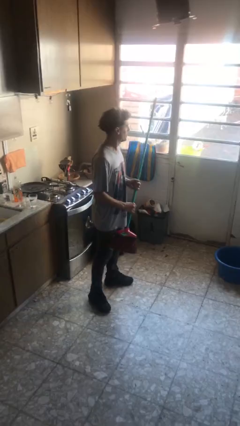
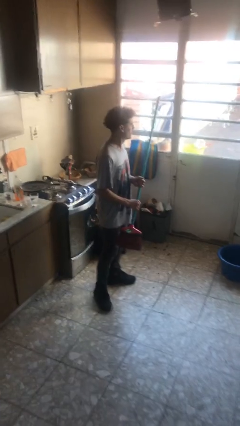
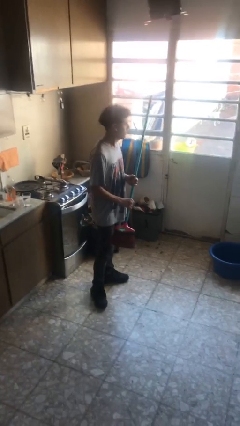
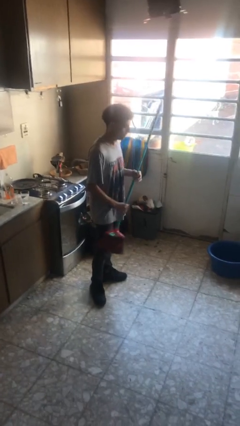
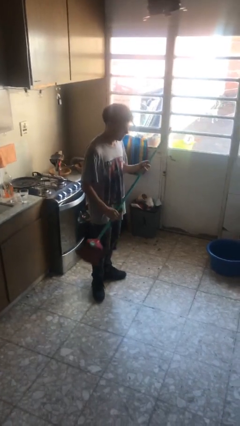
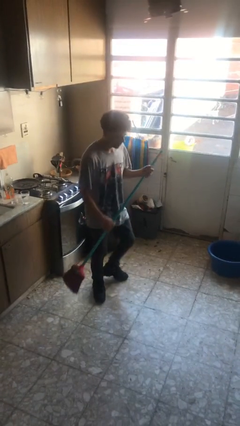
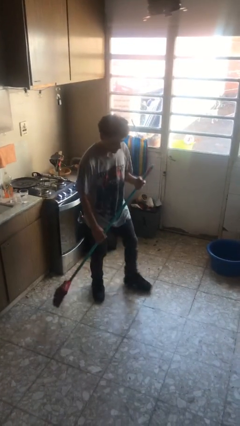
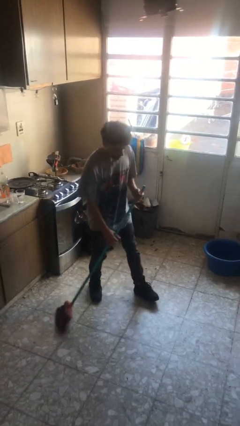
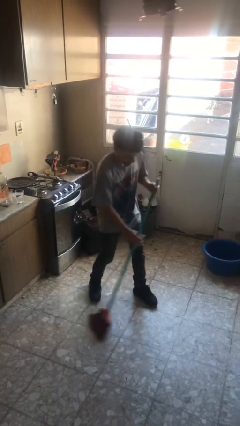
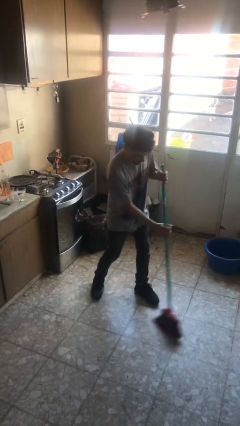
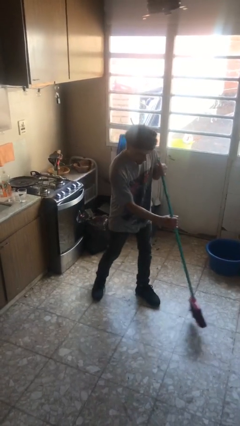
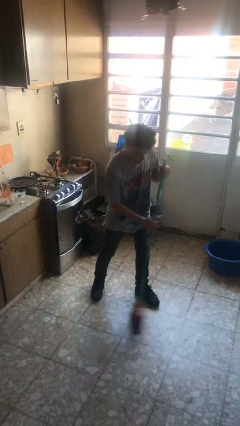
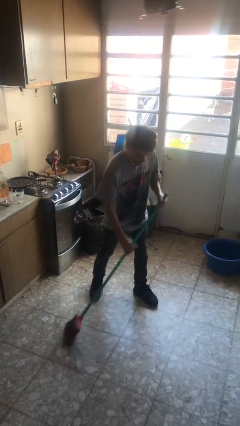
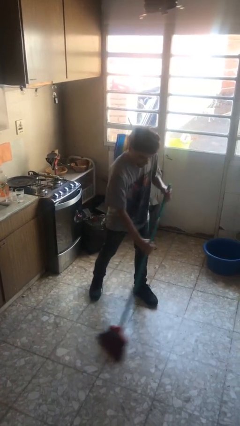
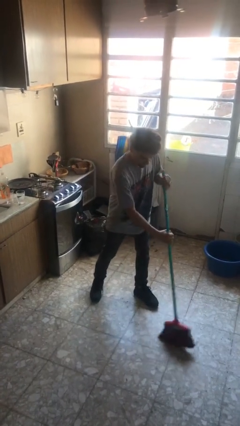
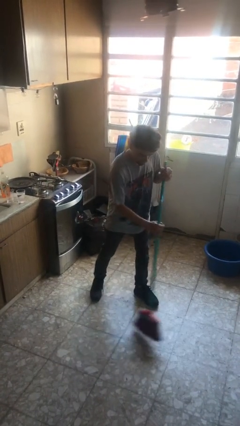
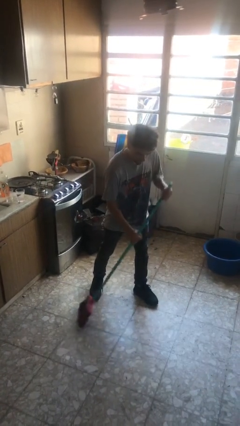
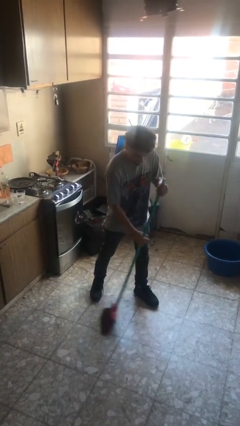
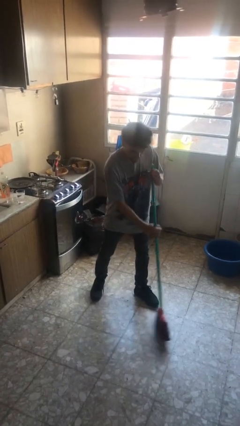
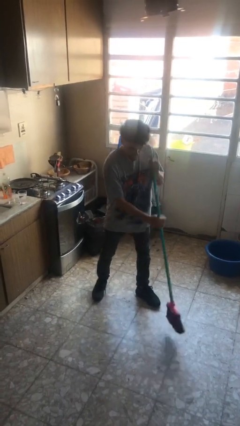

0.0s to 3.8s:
person sweeps floor

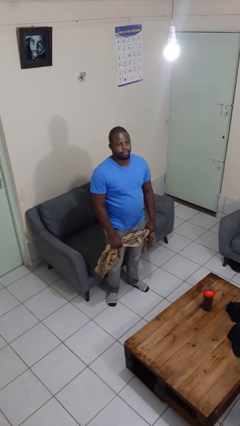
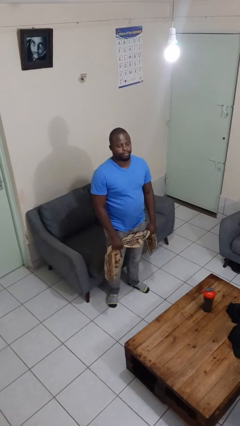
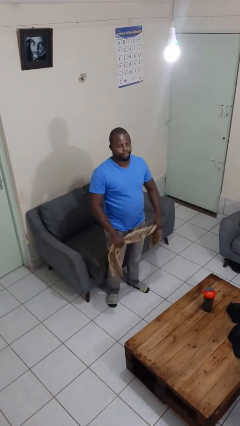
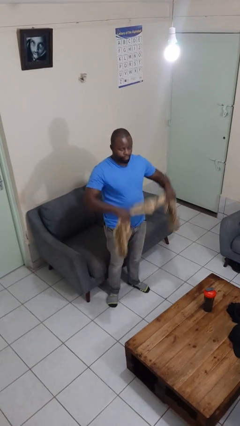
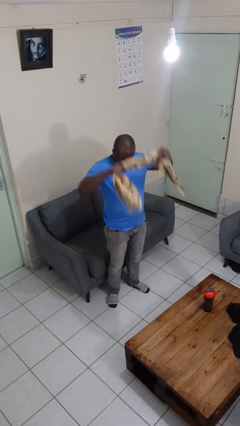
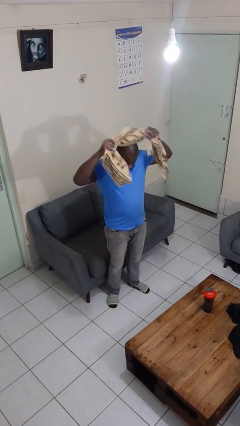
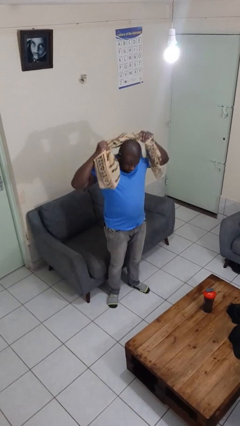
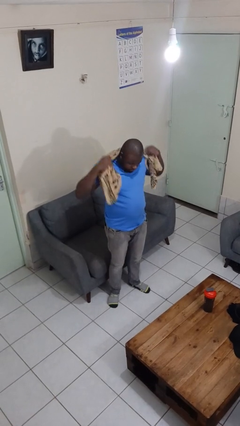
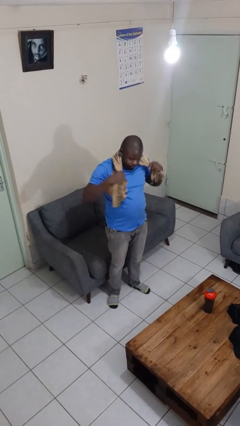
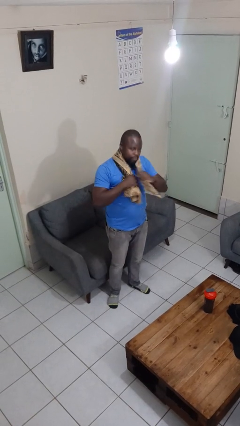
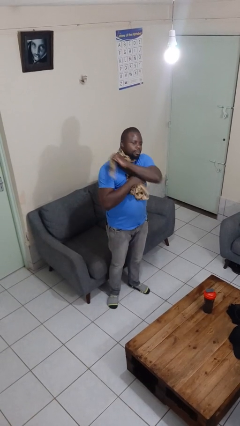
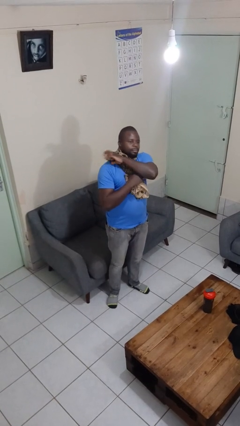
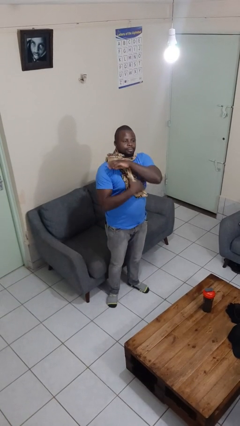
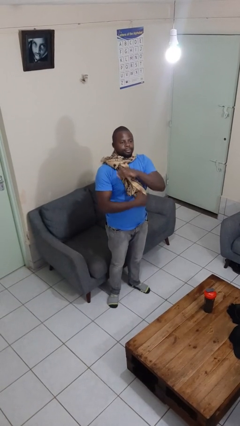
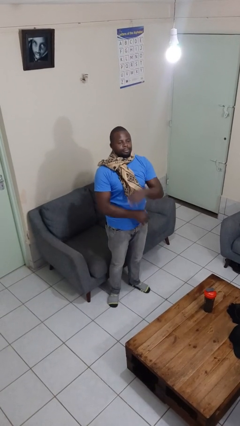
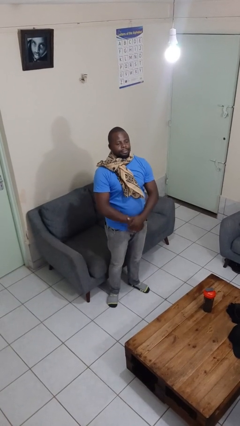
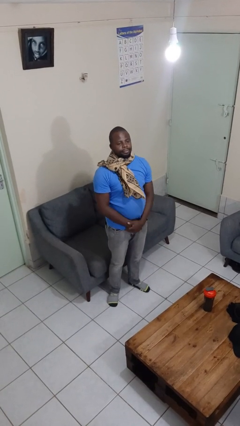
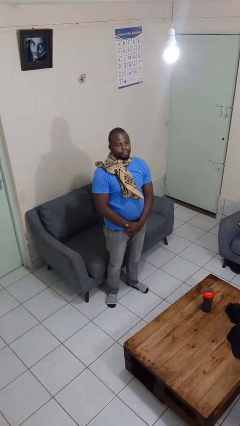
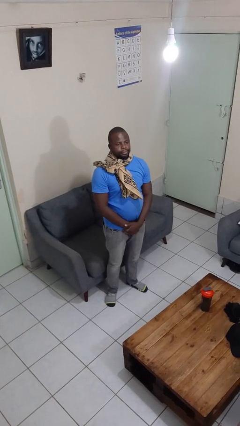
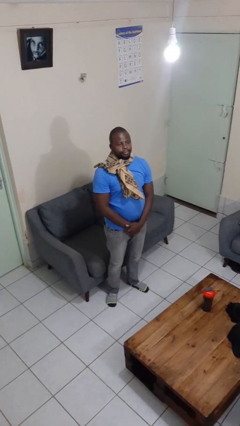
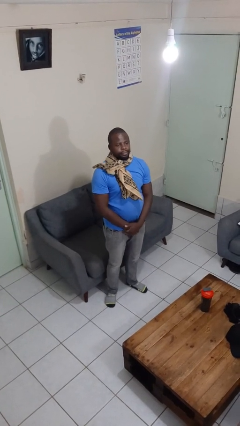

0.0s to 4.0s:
person puts on scarf

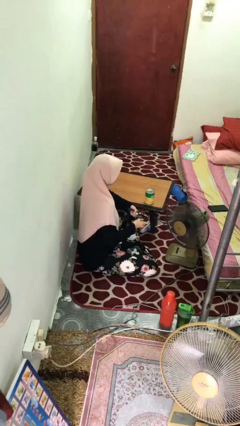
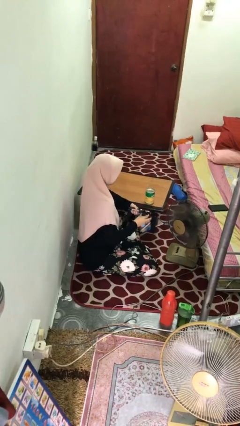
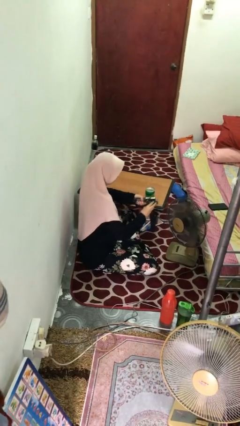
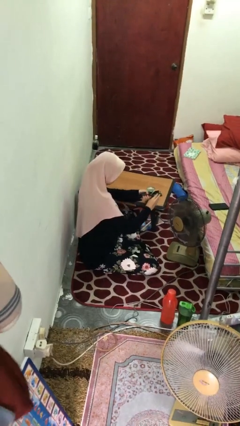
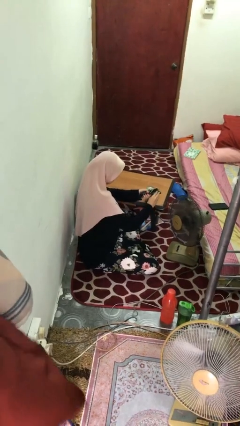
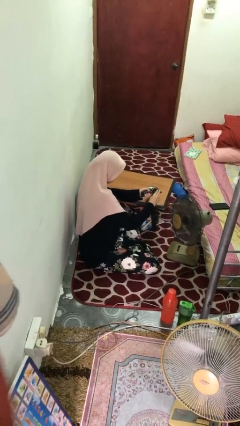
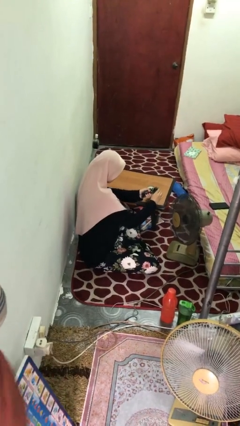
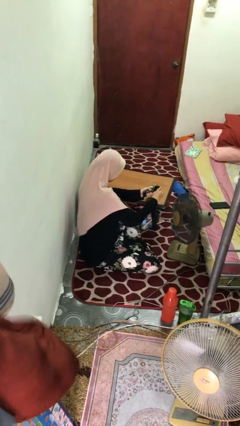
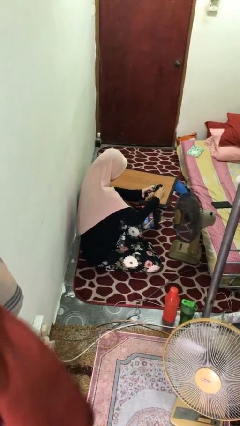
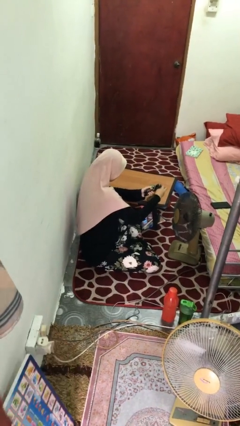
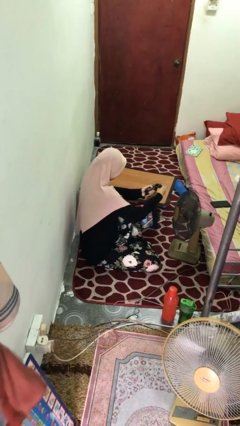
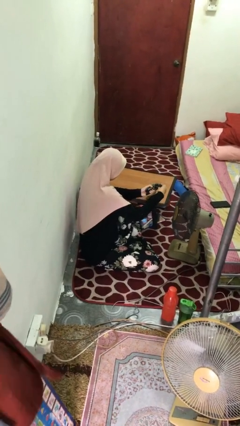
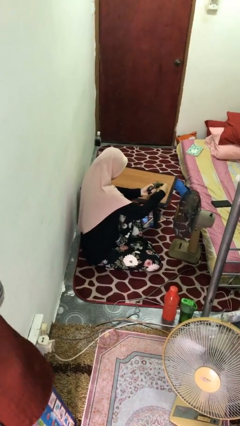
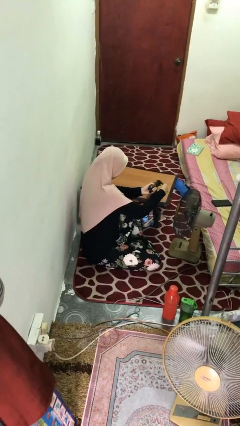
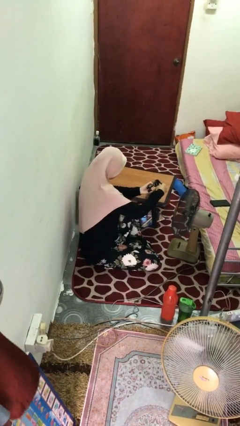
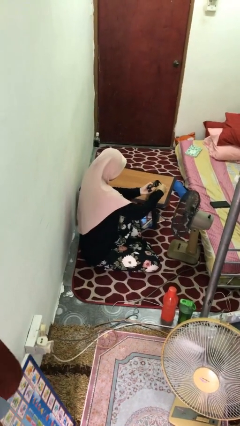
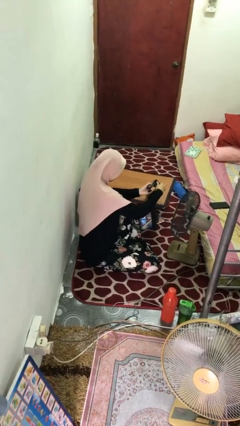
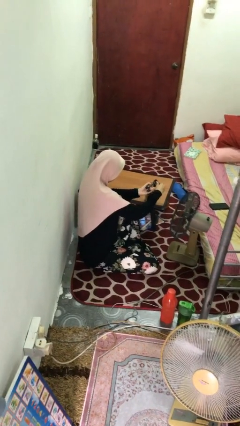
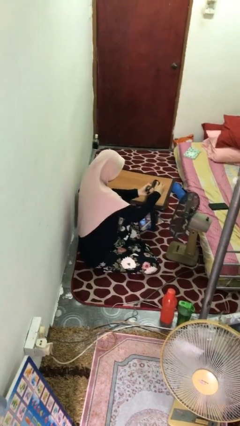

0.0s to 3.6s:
person opens can with can opener

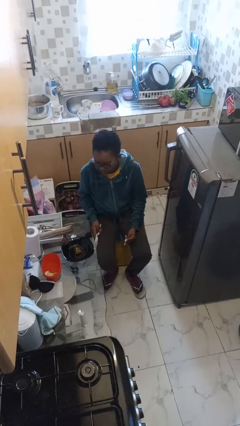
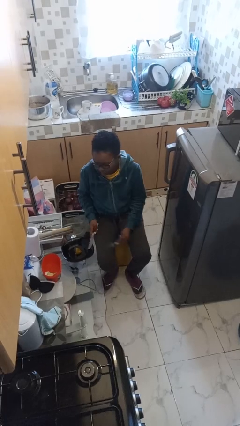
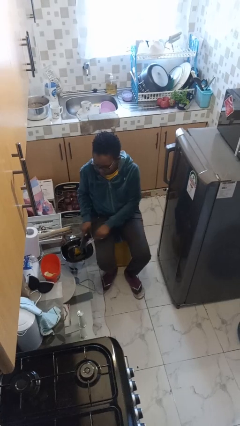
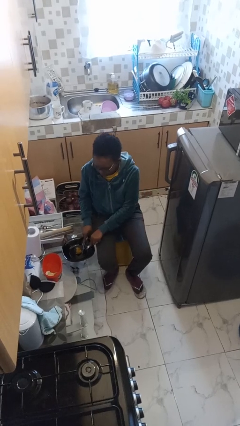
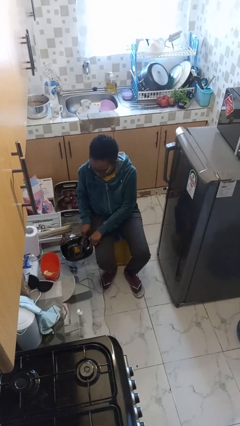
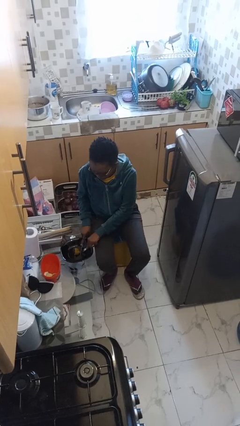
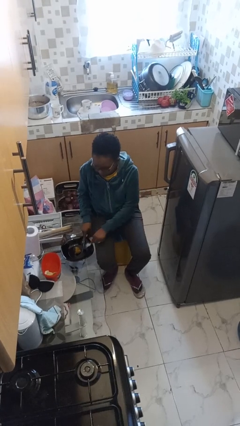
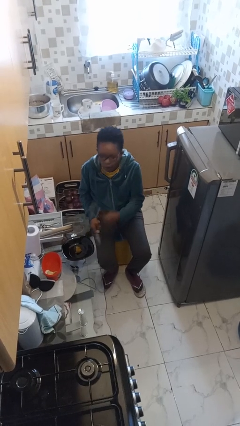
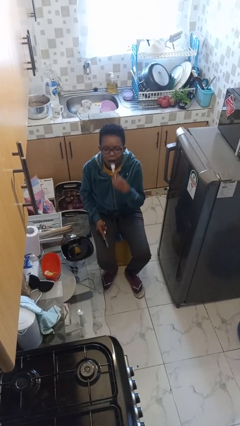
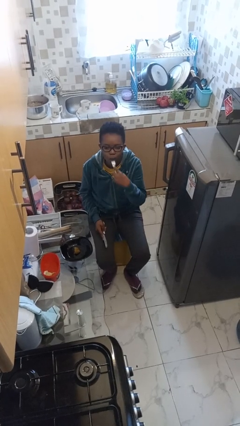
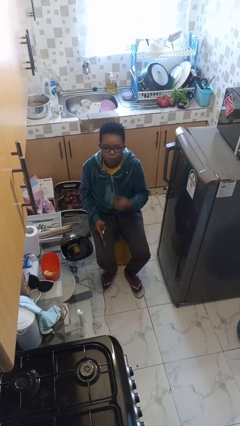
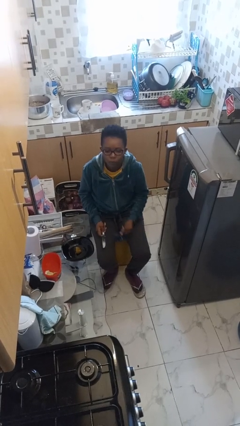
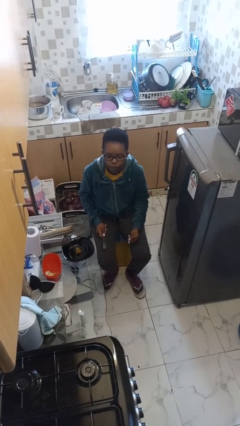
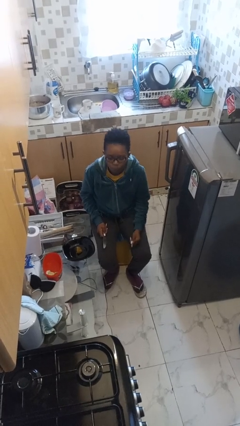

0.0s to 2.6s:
person eats with utensil

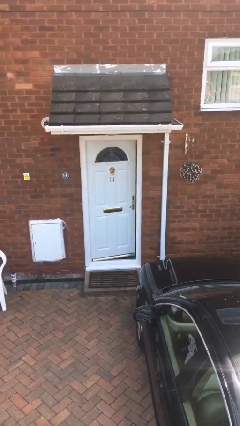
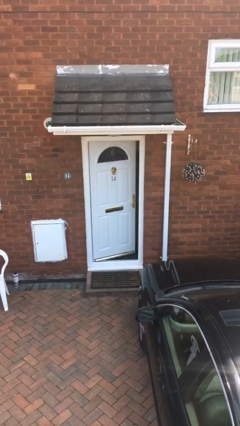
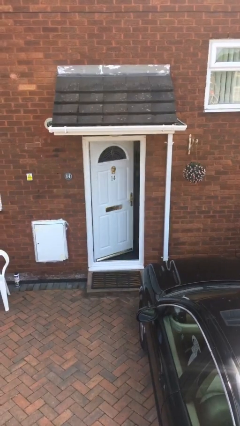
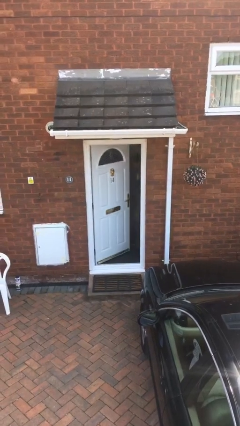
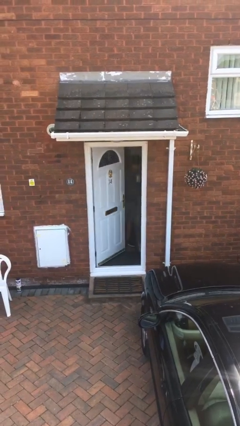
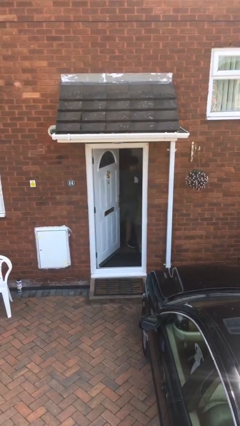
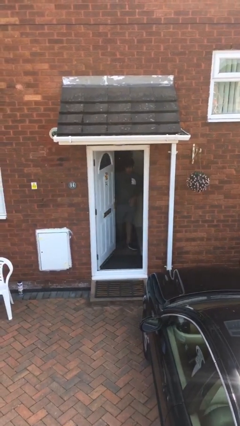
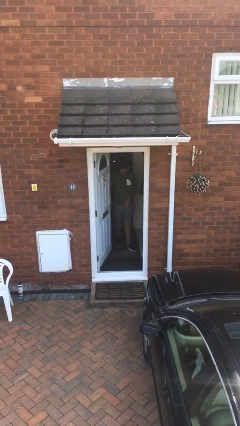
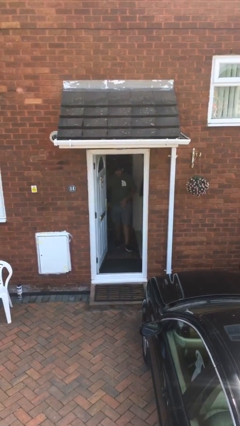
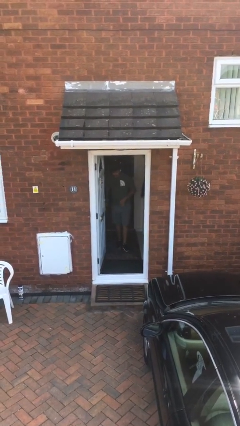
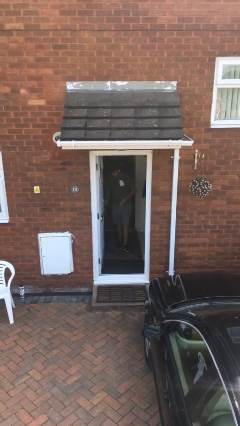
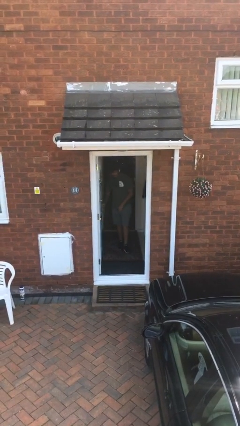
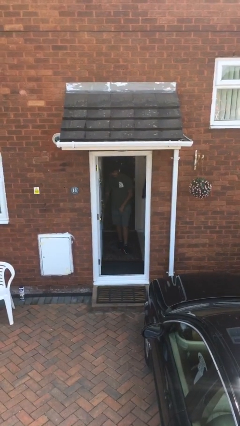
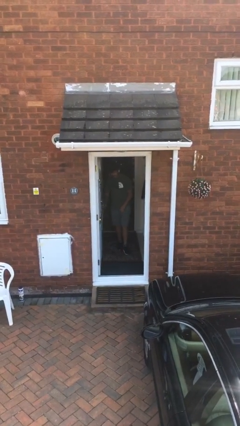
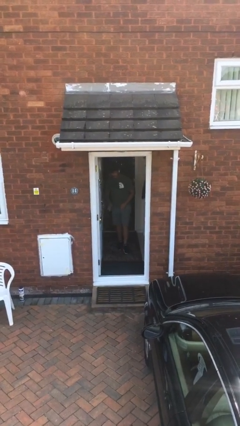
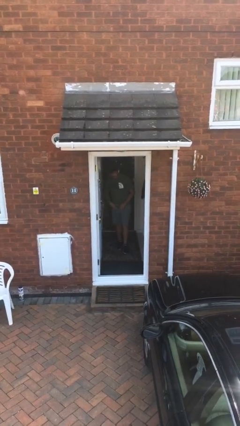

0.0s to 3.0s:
person opens facility door

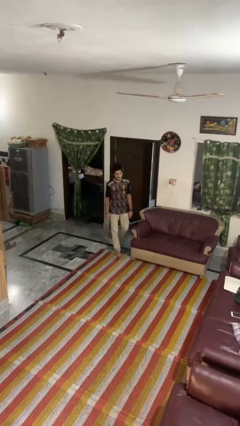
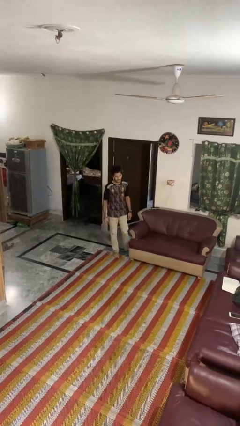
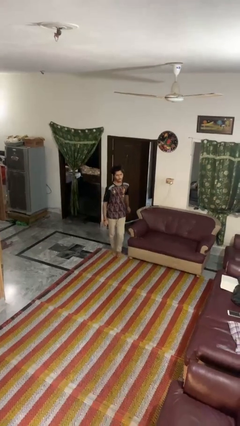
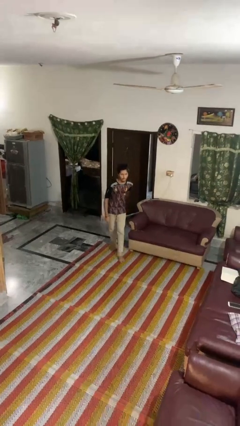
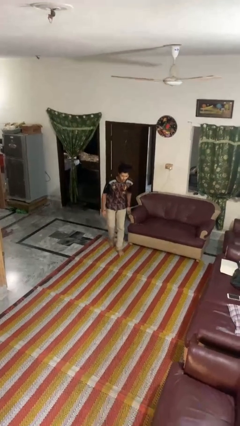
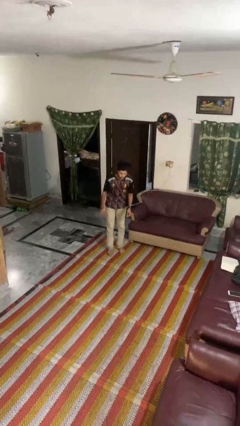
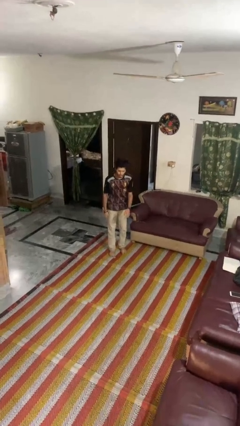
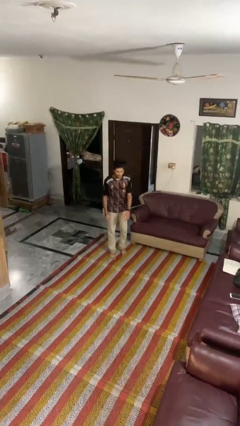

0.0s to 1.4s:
person stubs toe
